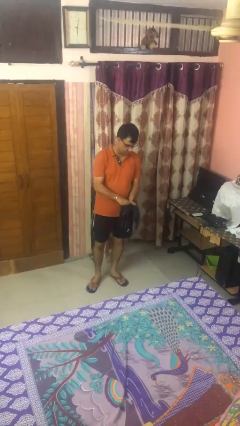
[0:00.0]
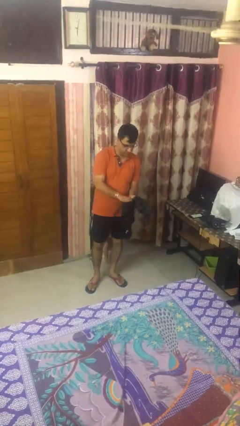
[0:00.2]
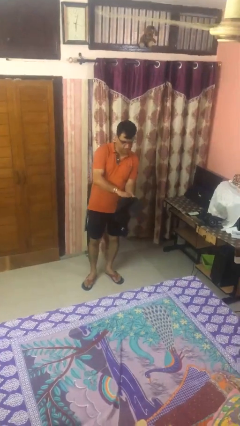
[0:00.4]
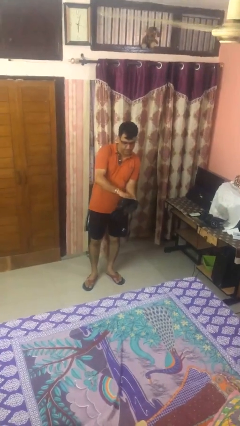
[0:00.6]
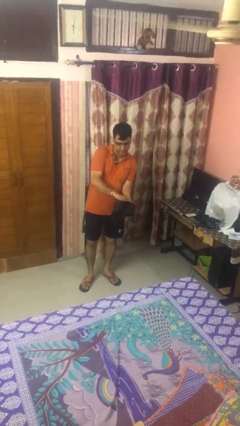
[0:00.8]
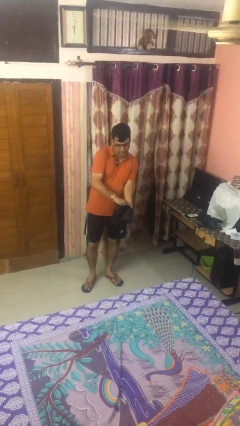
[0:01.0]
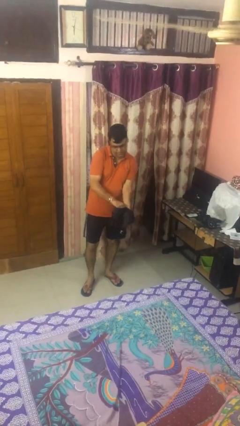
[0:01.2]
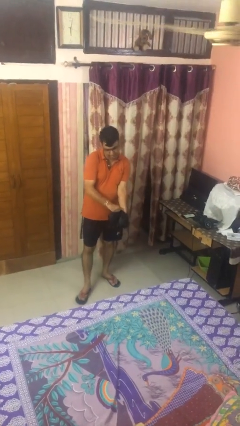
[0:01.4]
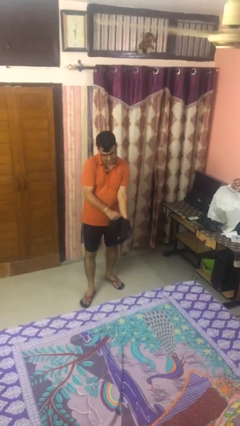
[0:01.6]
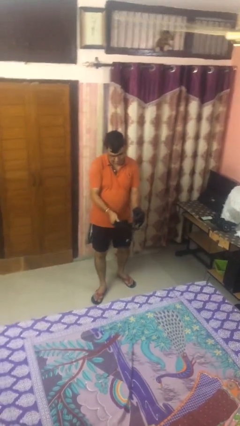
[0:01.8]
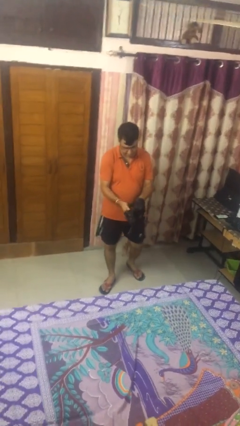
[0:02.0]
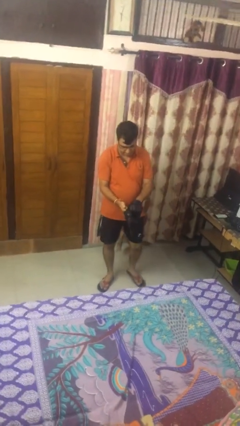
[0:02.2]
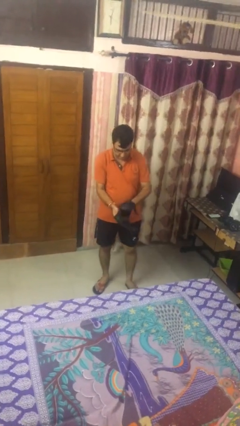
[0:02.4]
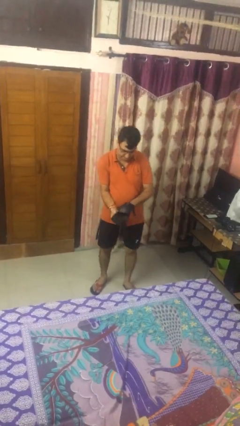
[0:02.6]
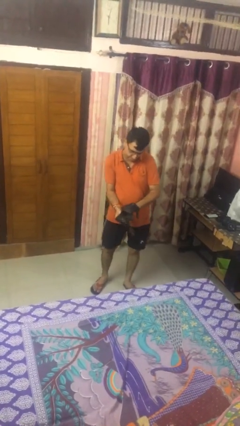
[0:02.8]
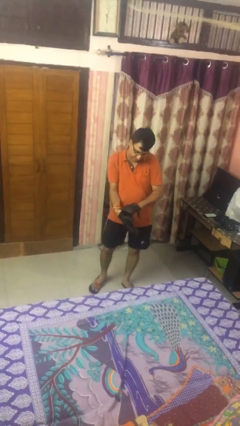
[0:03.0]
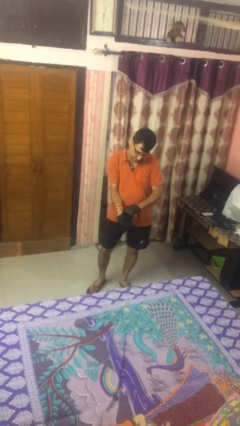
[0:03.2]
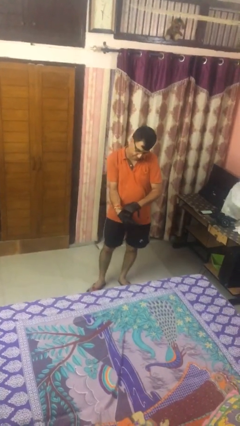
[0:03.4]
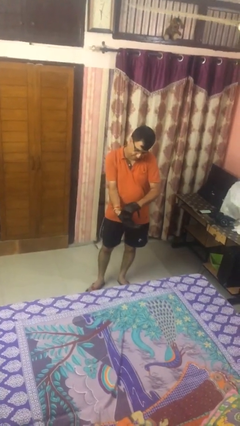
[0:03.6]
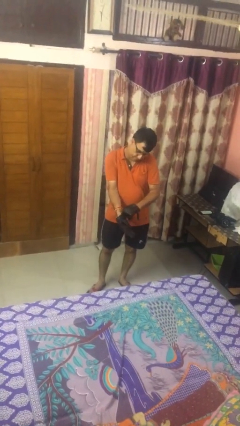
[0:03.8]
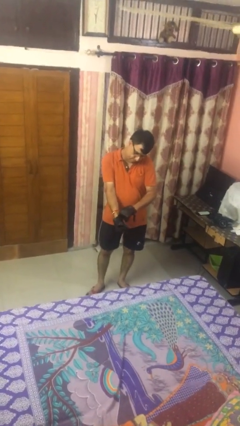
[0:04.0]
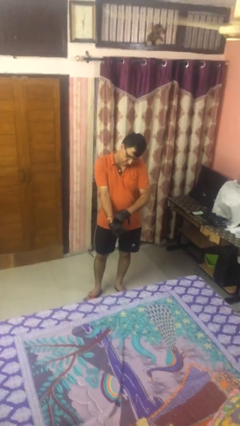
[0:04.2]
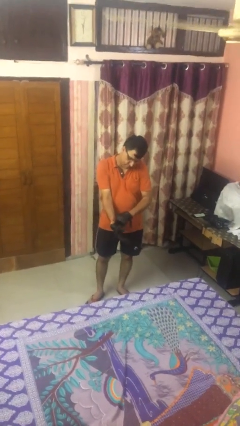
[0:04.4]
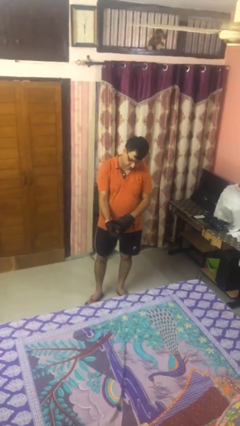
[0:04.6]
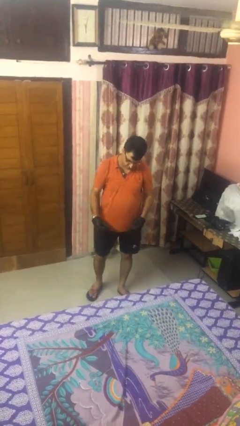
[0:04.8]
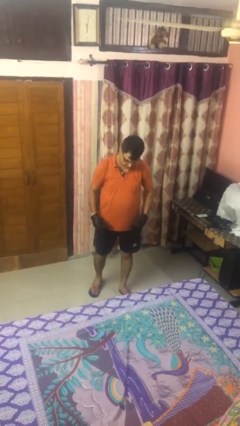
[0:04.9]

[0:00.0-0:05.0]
person puts on gloves

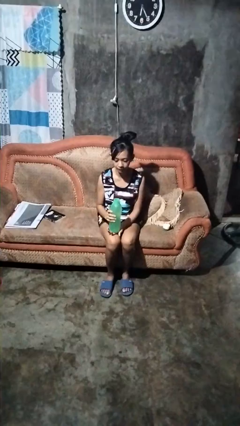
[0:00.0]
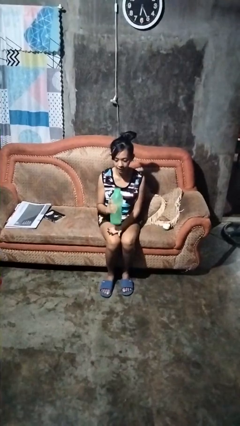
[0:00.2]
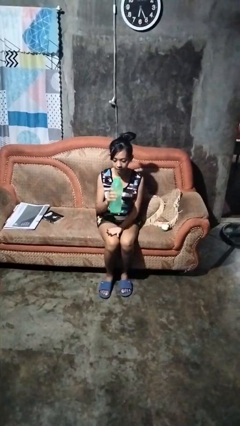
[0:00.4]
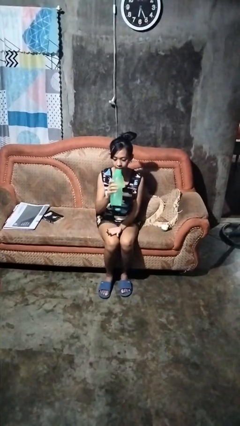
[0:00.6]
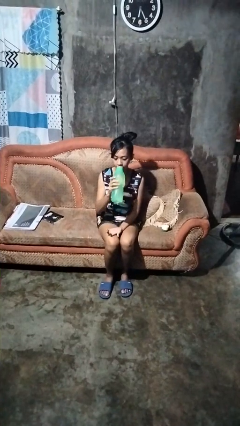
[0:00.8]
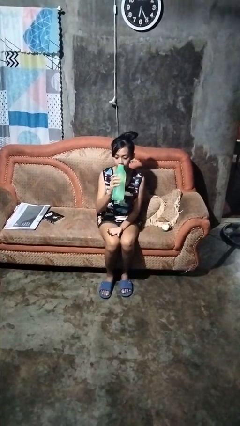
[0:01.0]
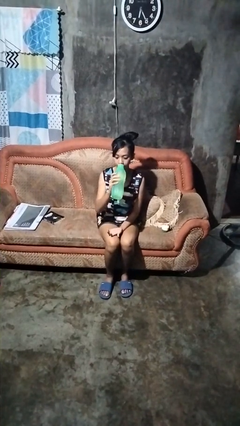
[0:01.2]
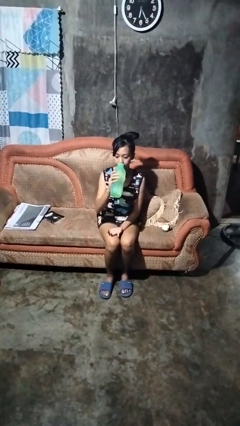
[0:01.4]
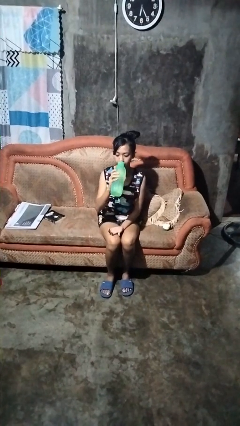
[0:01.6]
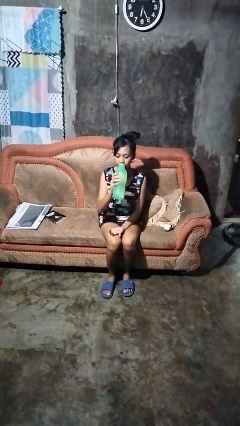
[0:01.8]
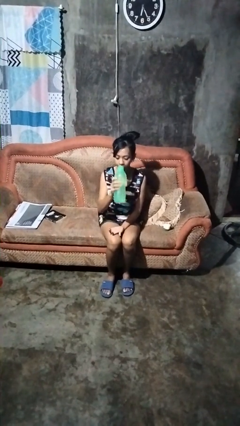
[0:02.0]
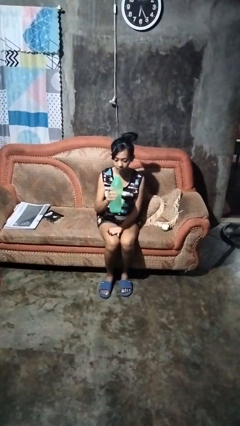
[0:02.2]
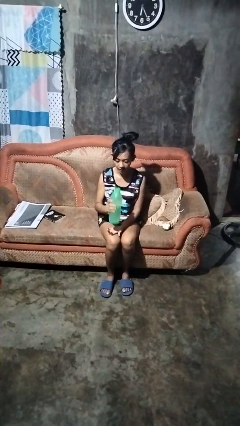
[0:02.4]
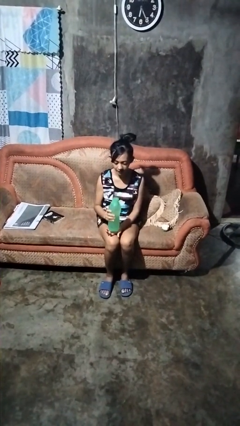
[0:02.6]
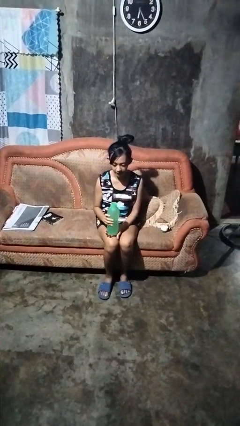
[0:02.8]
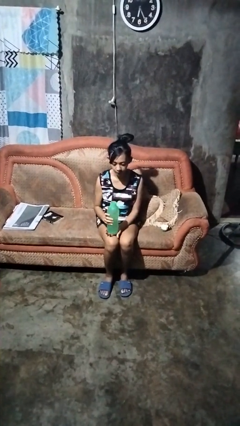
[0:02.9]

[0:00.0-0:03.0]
person drinks from bottle

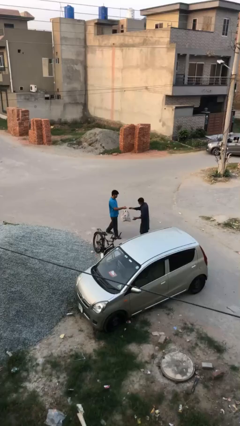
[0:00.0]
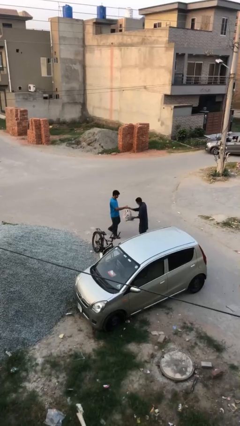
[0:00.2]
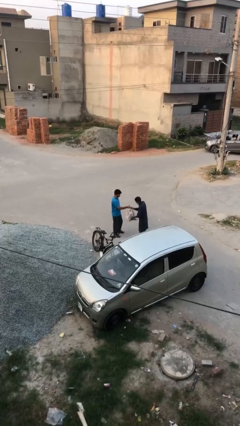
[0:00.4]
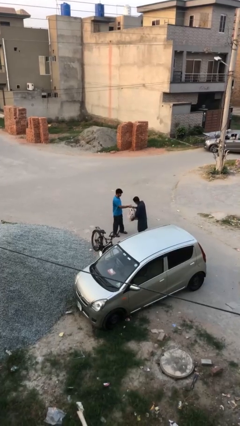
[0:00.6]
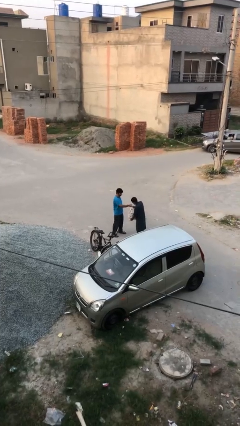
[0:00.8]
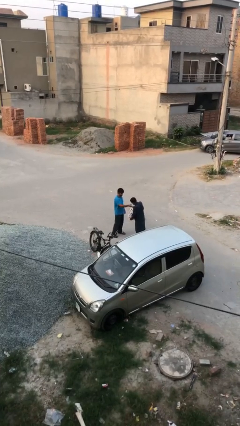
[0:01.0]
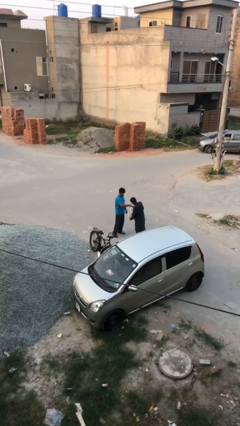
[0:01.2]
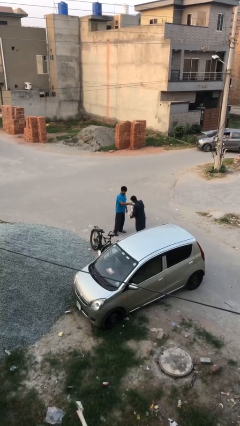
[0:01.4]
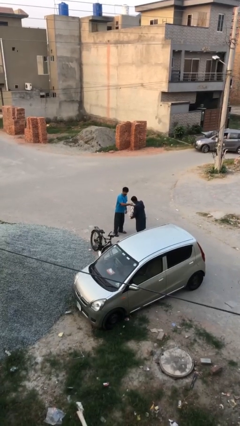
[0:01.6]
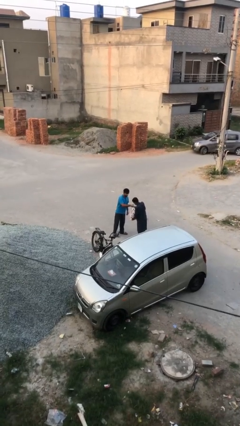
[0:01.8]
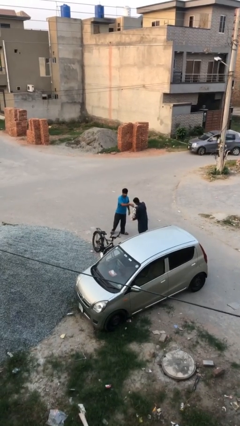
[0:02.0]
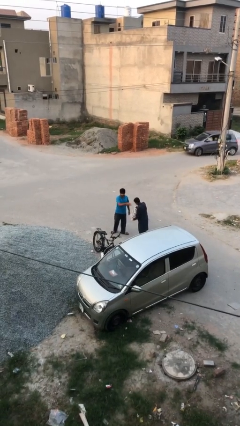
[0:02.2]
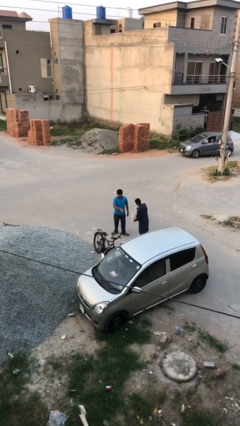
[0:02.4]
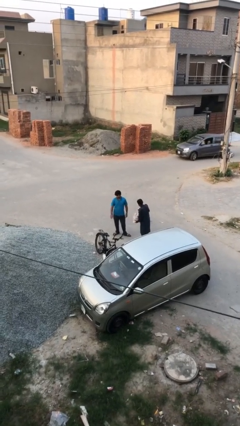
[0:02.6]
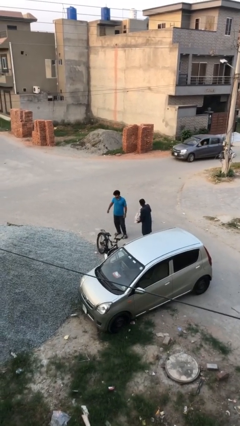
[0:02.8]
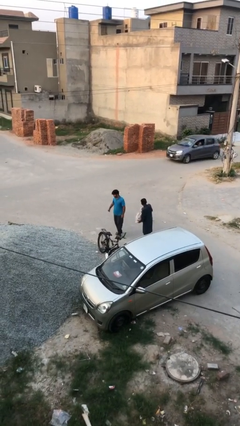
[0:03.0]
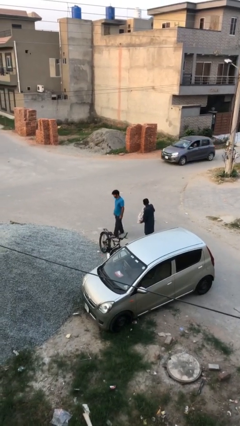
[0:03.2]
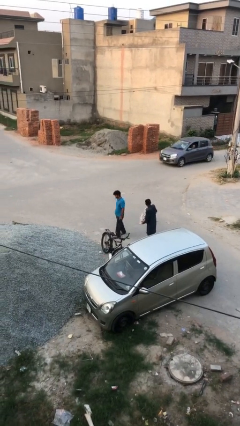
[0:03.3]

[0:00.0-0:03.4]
person transfers object to person

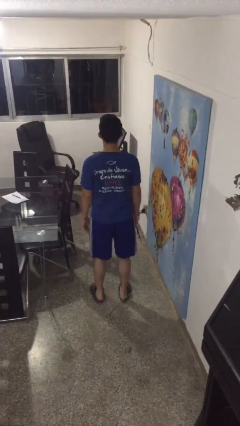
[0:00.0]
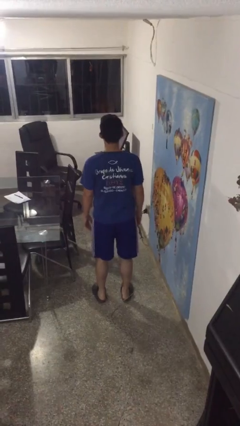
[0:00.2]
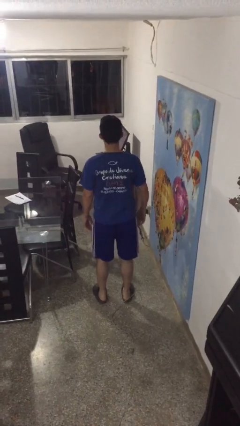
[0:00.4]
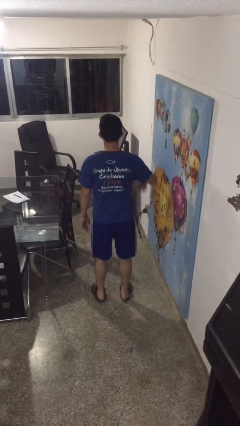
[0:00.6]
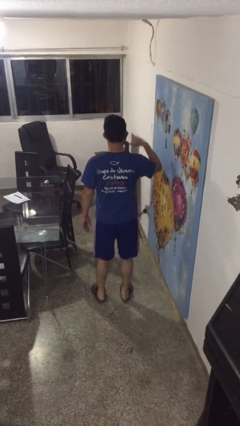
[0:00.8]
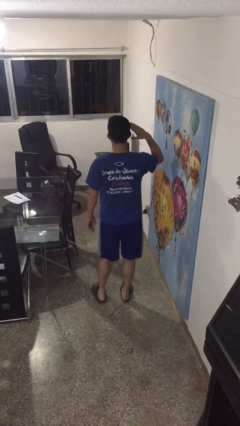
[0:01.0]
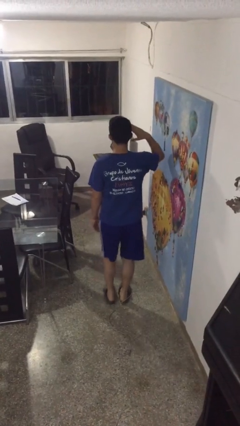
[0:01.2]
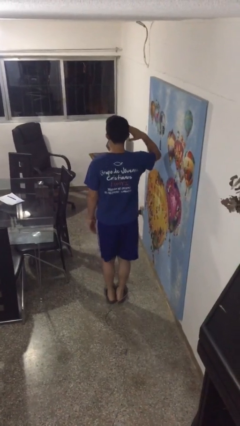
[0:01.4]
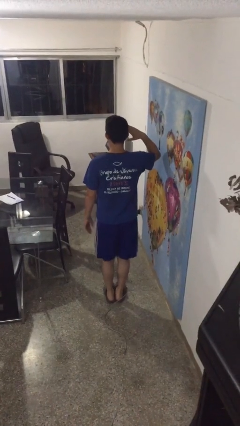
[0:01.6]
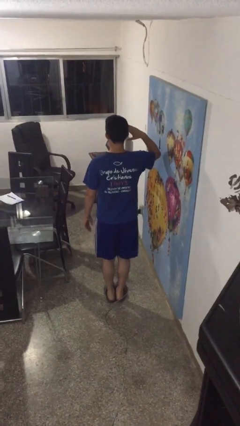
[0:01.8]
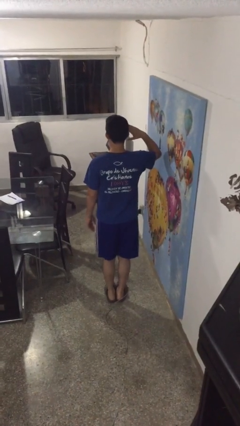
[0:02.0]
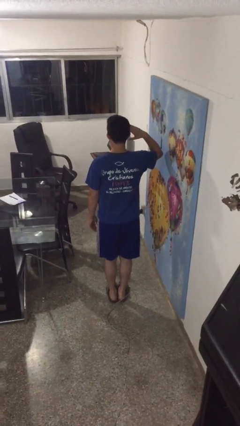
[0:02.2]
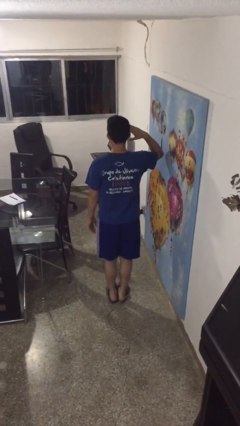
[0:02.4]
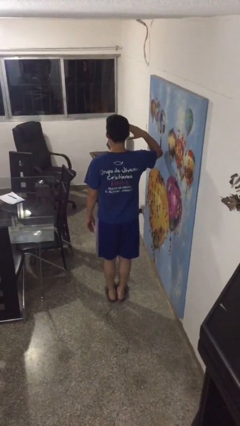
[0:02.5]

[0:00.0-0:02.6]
person salutes

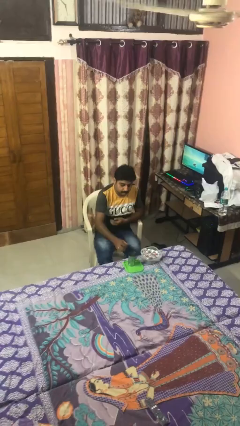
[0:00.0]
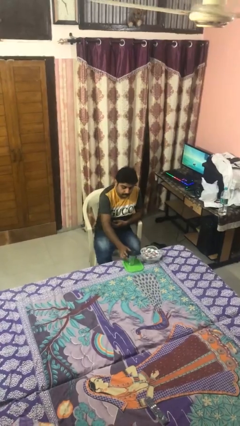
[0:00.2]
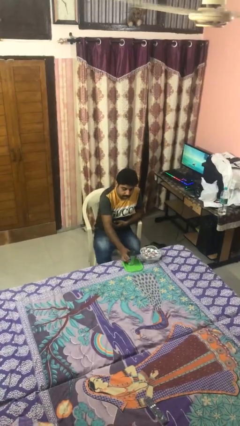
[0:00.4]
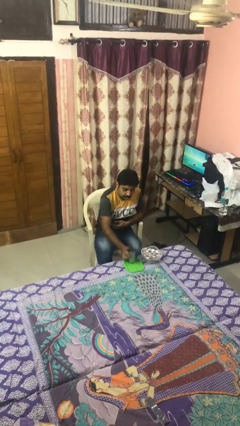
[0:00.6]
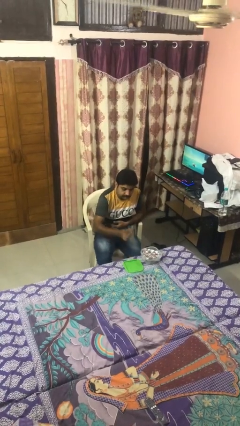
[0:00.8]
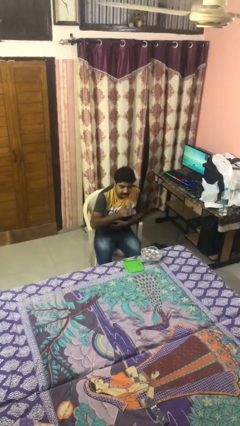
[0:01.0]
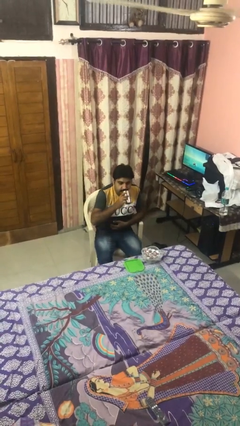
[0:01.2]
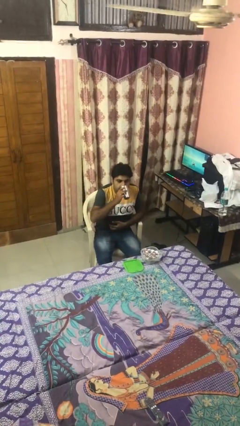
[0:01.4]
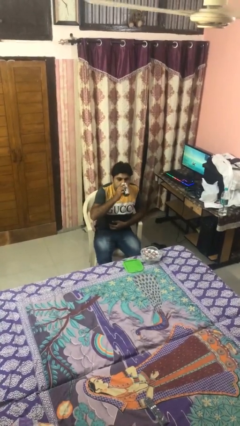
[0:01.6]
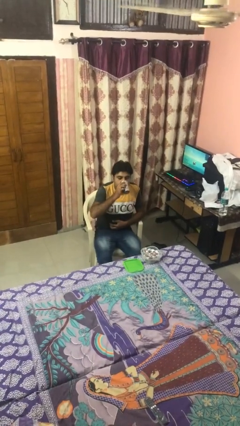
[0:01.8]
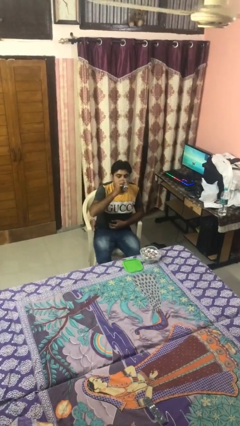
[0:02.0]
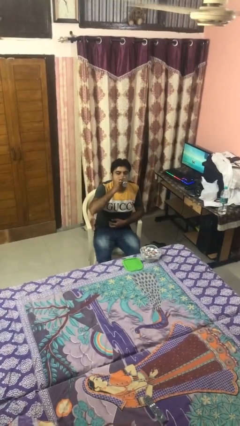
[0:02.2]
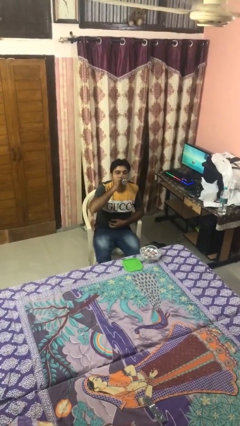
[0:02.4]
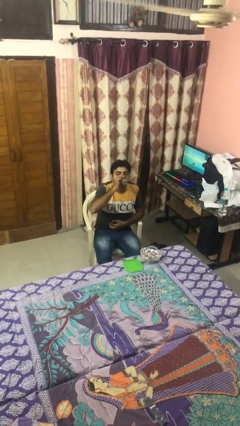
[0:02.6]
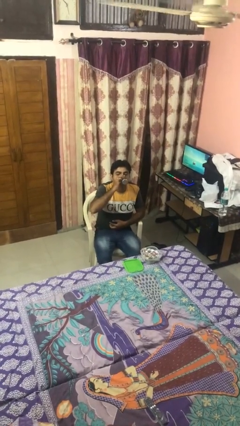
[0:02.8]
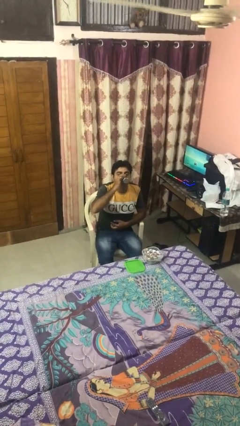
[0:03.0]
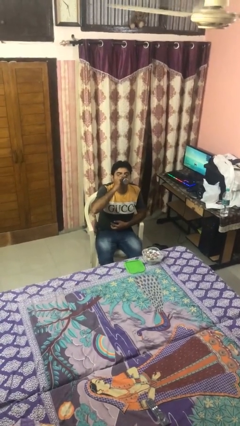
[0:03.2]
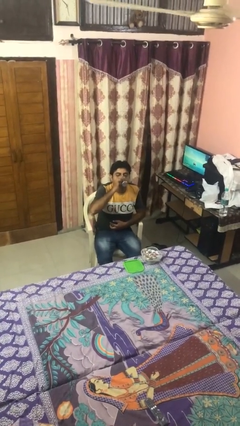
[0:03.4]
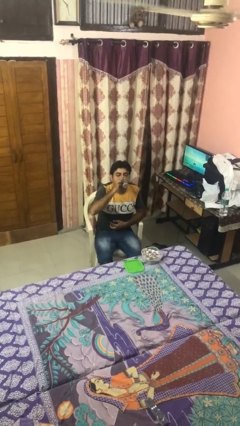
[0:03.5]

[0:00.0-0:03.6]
person drinks from cup

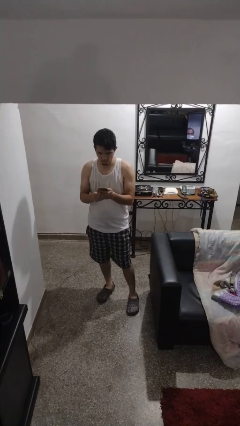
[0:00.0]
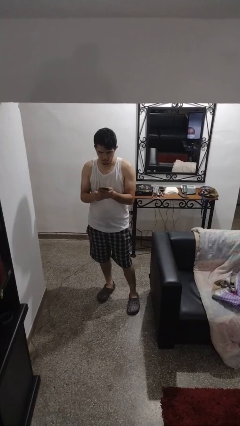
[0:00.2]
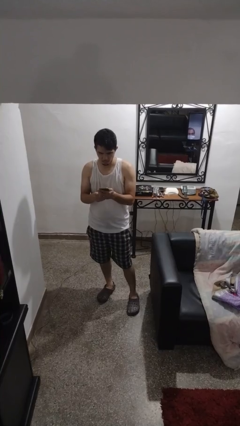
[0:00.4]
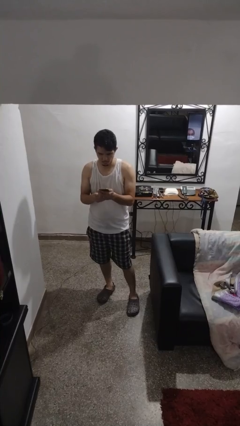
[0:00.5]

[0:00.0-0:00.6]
person puts phone into pocket
